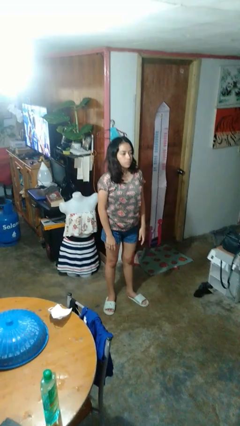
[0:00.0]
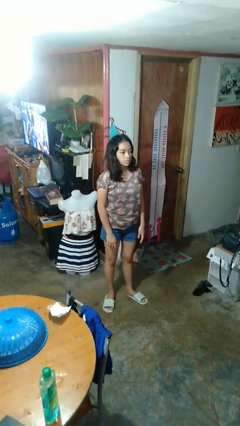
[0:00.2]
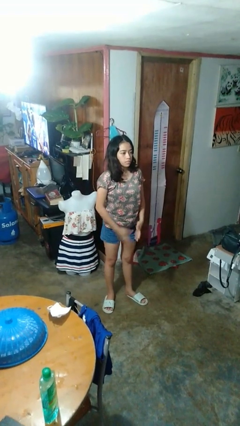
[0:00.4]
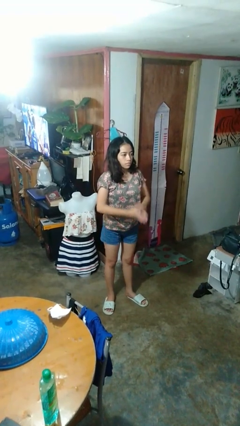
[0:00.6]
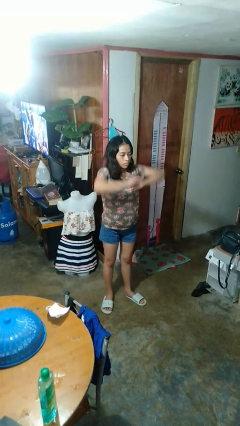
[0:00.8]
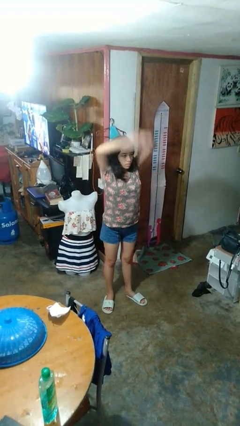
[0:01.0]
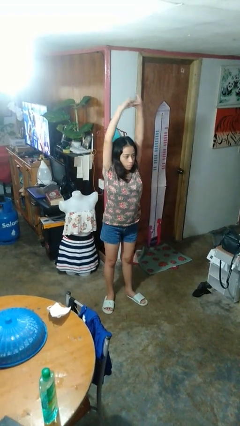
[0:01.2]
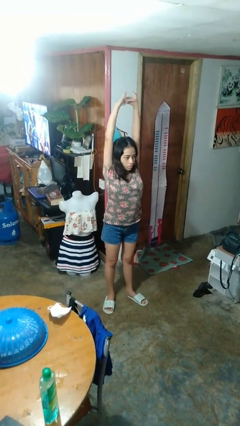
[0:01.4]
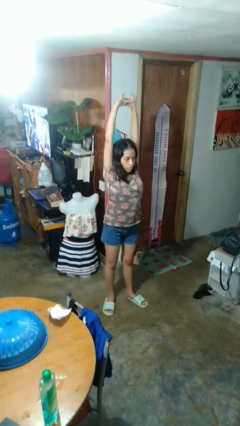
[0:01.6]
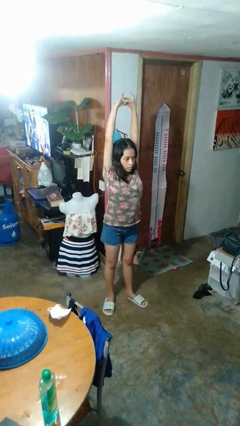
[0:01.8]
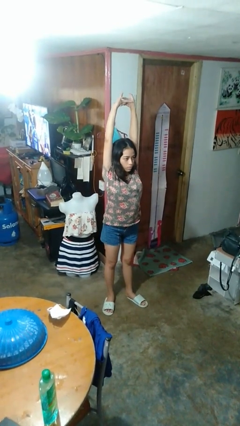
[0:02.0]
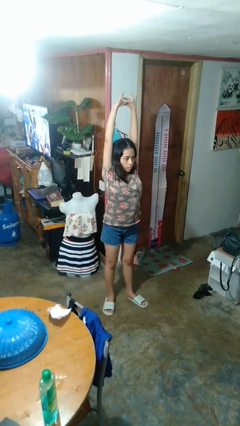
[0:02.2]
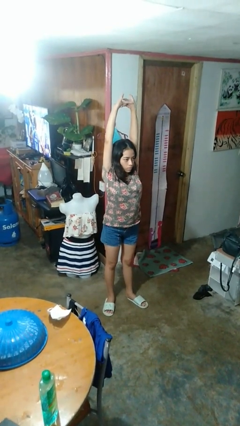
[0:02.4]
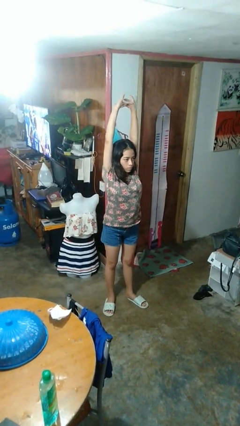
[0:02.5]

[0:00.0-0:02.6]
person stretches arms over head

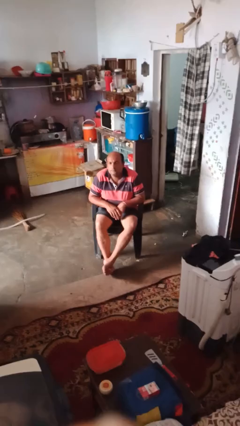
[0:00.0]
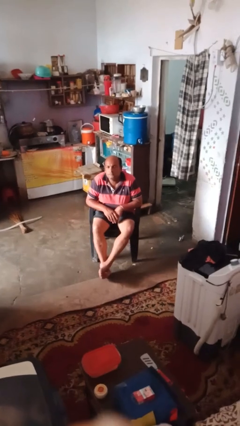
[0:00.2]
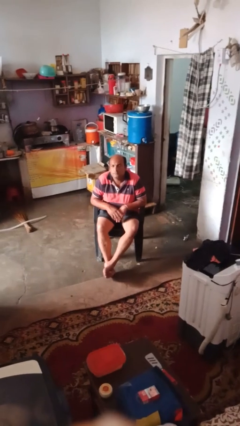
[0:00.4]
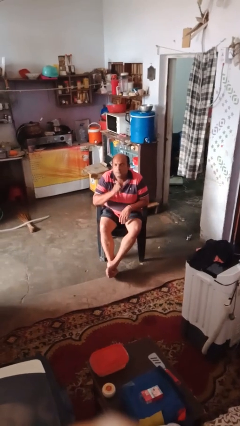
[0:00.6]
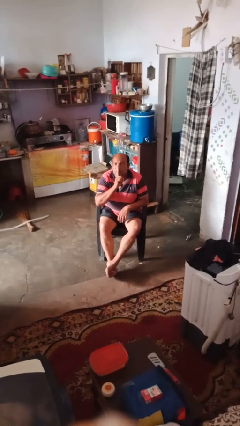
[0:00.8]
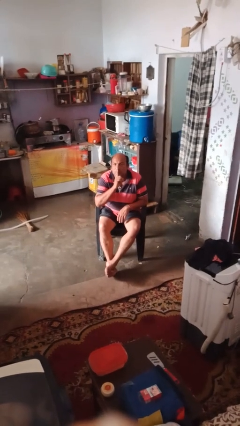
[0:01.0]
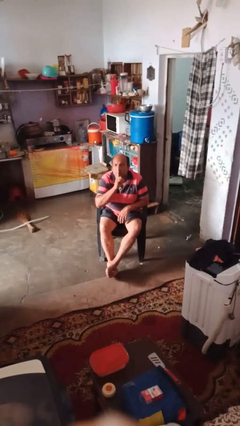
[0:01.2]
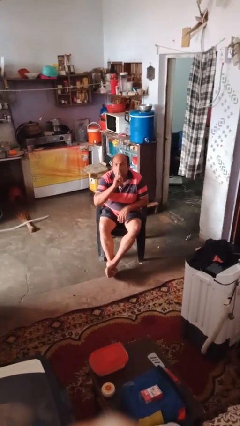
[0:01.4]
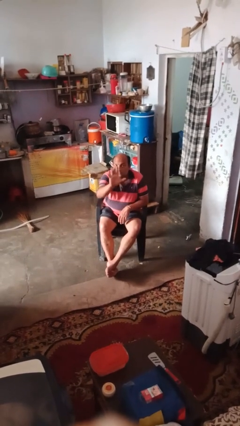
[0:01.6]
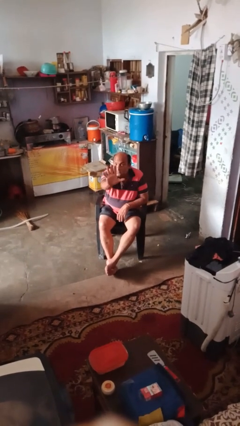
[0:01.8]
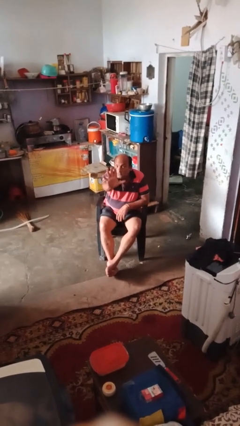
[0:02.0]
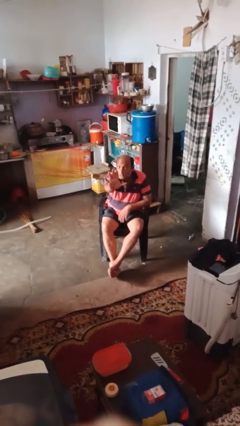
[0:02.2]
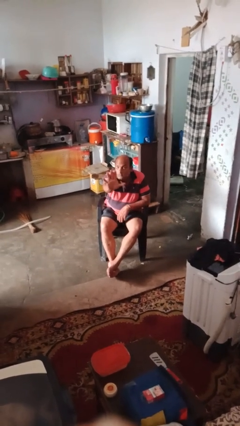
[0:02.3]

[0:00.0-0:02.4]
person gestures be quiet

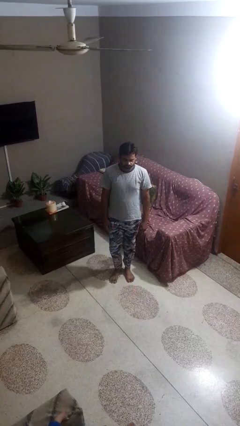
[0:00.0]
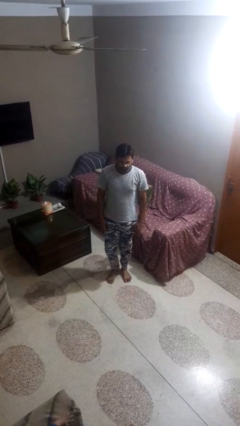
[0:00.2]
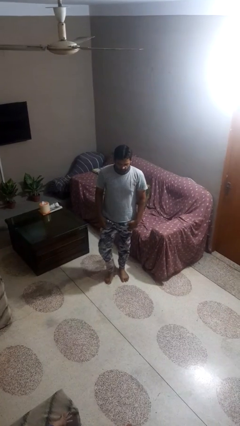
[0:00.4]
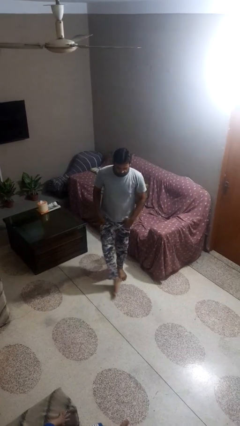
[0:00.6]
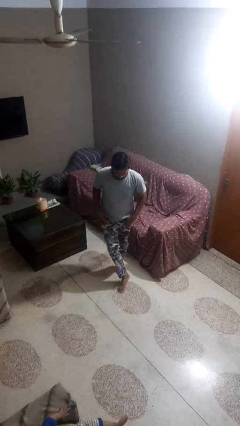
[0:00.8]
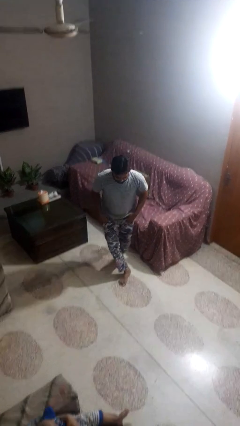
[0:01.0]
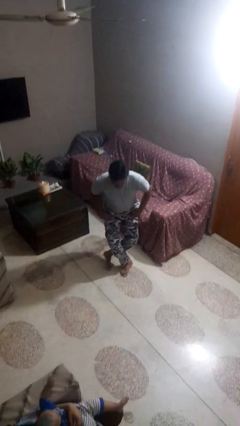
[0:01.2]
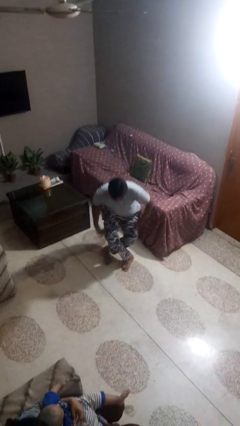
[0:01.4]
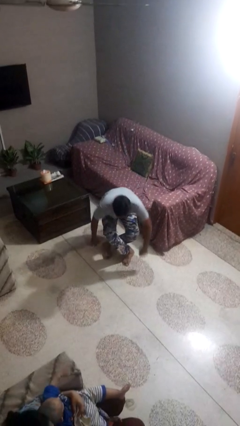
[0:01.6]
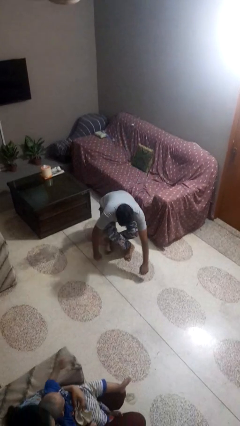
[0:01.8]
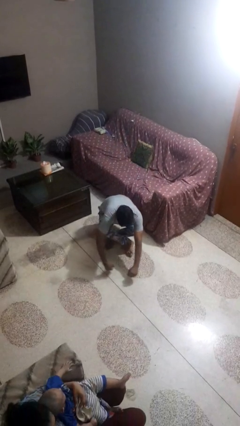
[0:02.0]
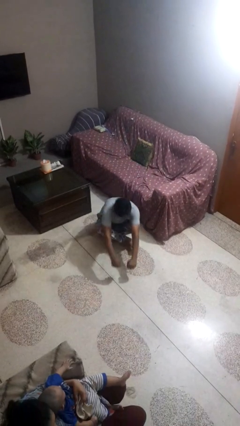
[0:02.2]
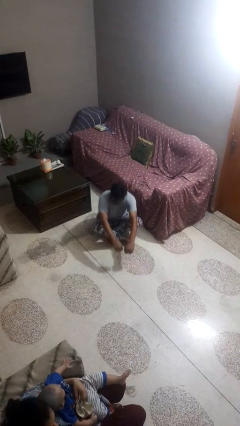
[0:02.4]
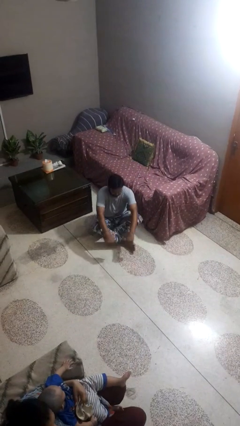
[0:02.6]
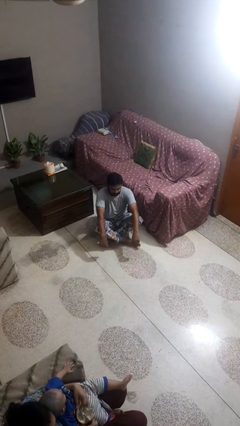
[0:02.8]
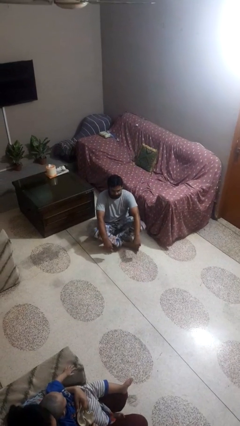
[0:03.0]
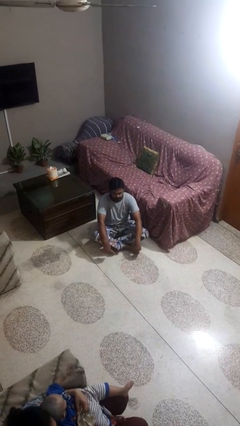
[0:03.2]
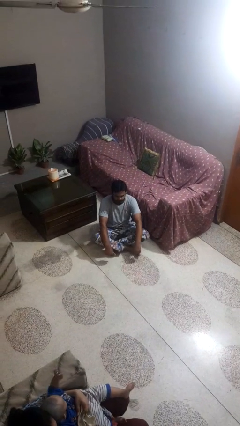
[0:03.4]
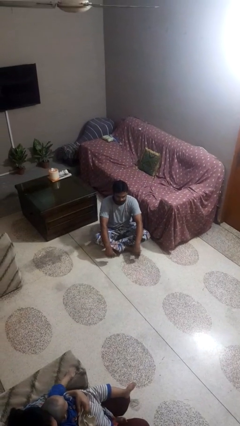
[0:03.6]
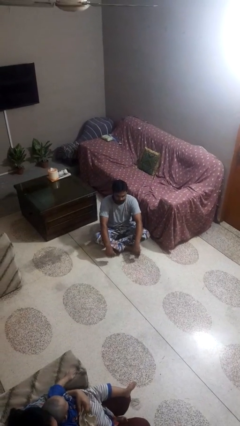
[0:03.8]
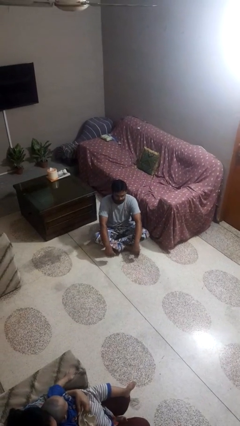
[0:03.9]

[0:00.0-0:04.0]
person sits crisscross

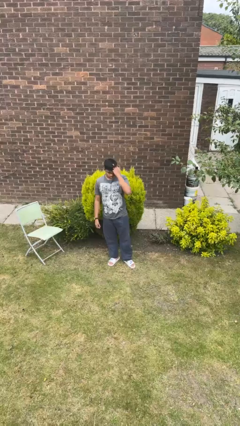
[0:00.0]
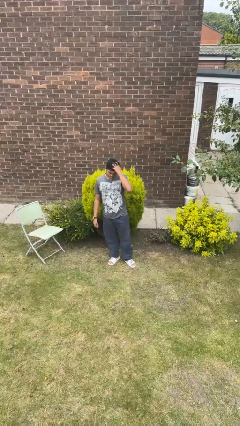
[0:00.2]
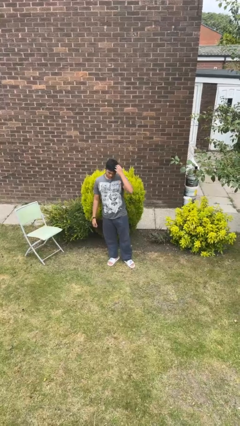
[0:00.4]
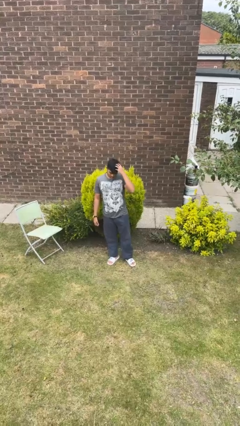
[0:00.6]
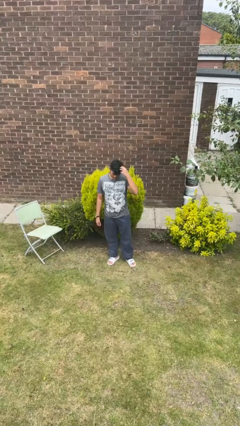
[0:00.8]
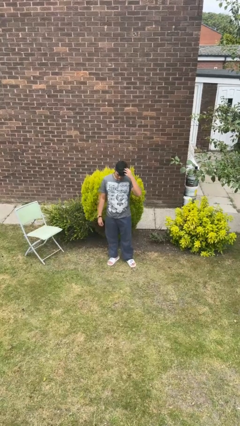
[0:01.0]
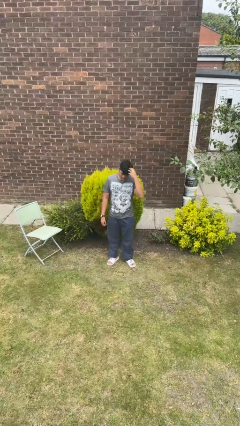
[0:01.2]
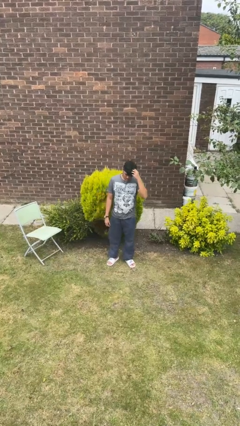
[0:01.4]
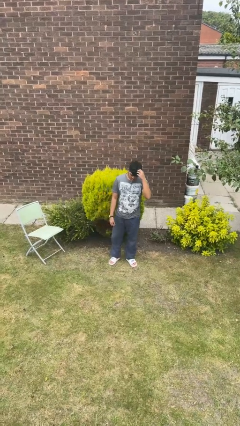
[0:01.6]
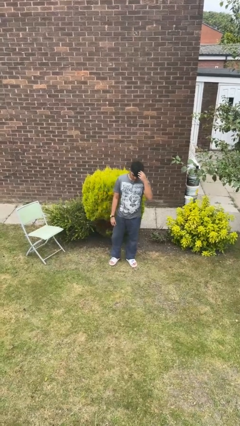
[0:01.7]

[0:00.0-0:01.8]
person scratches face

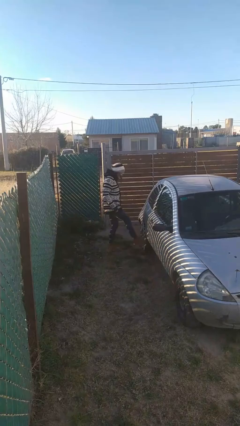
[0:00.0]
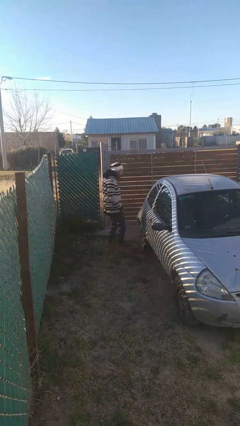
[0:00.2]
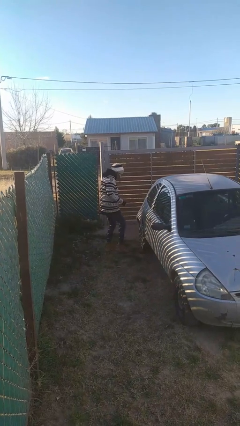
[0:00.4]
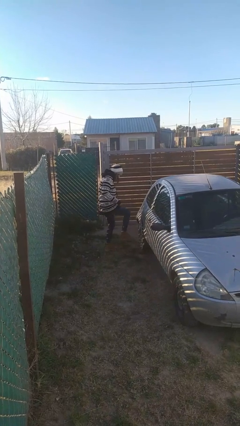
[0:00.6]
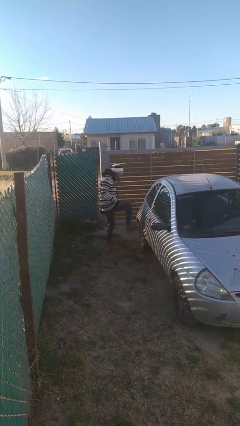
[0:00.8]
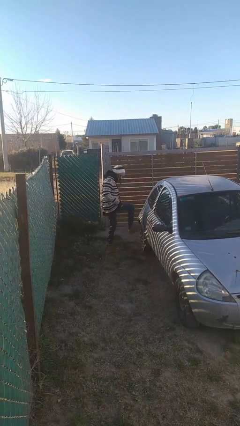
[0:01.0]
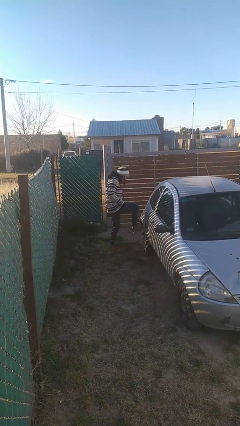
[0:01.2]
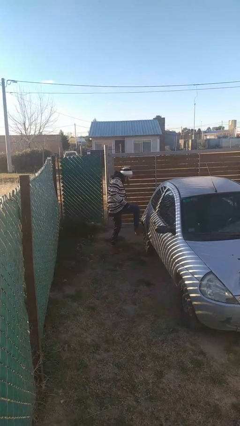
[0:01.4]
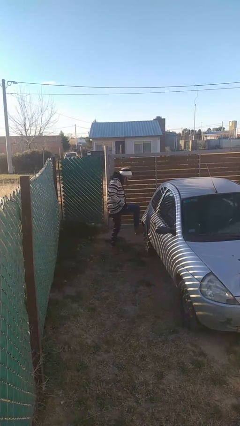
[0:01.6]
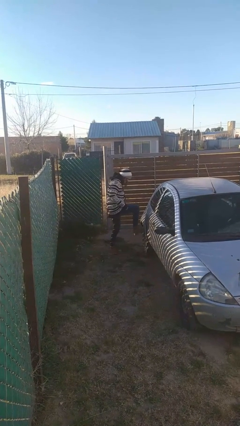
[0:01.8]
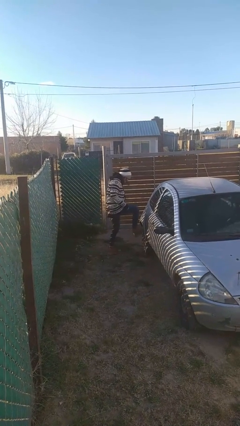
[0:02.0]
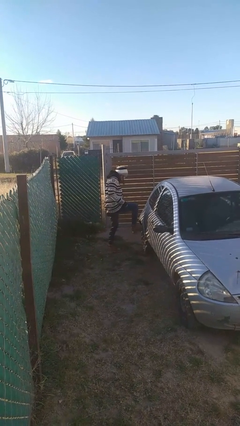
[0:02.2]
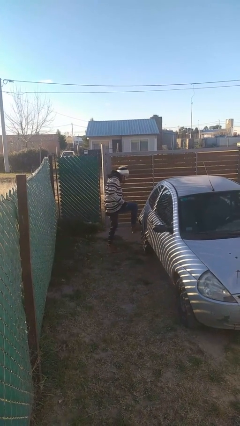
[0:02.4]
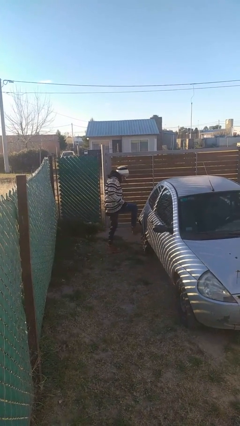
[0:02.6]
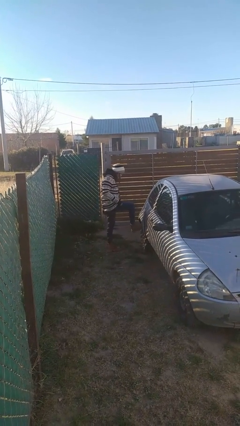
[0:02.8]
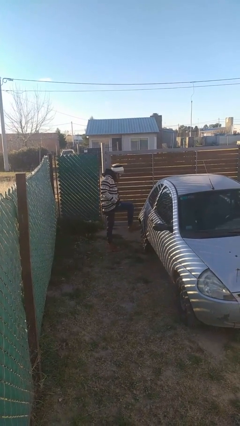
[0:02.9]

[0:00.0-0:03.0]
person kicks car tires

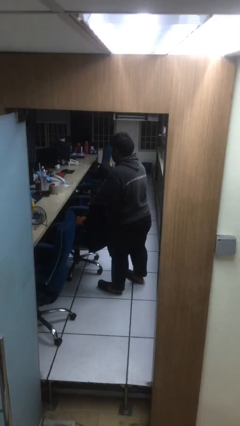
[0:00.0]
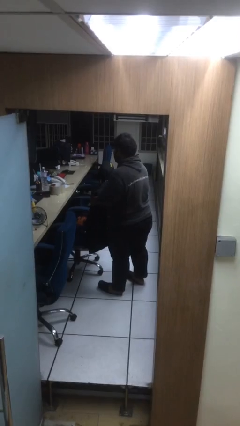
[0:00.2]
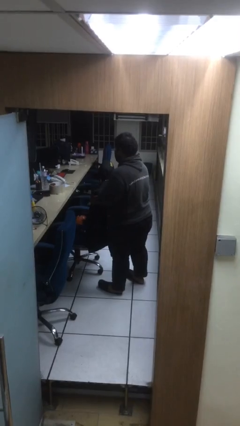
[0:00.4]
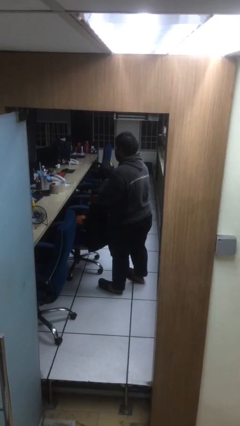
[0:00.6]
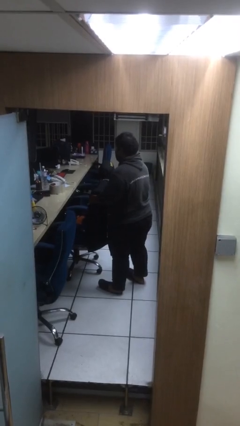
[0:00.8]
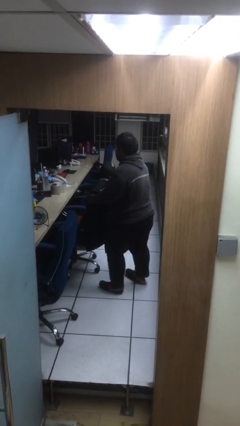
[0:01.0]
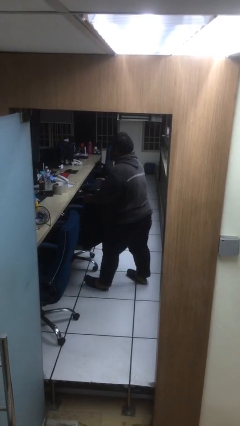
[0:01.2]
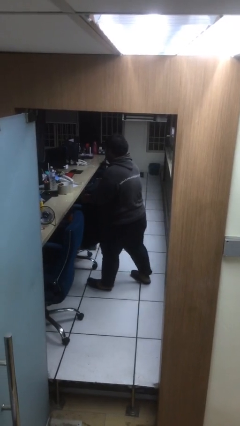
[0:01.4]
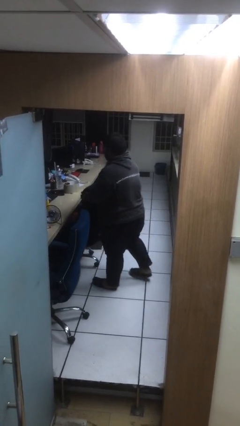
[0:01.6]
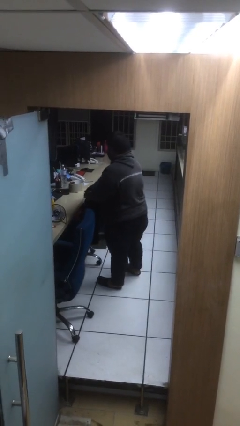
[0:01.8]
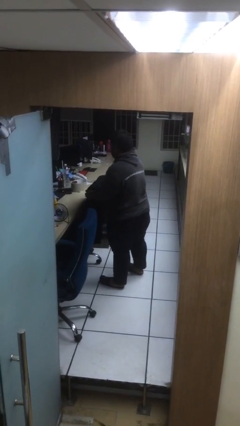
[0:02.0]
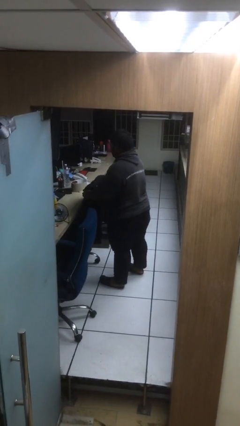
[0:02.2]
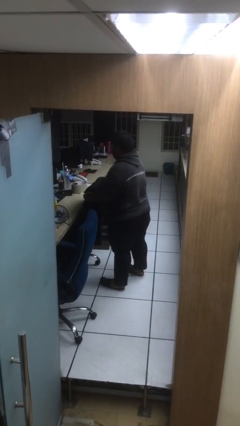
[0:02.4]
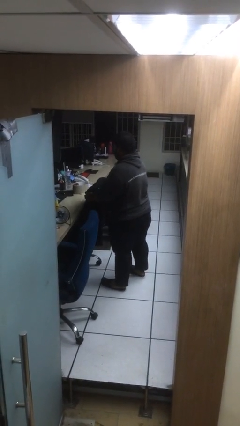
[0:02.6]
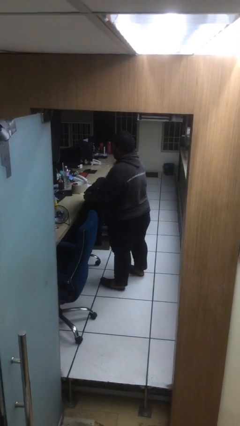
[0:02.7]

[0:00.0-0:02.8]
person pushes in chair

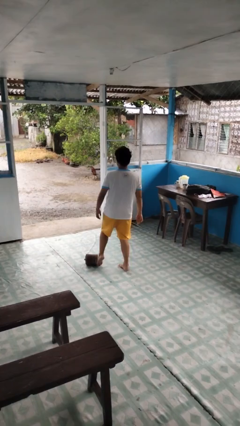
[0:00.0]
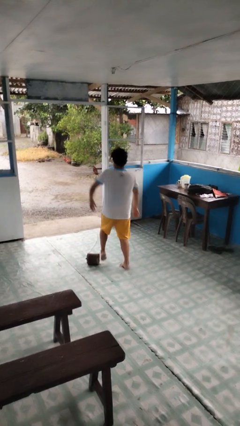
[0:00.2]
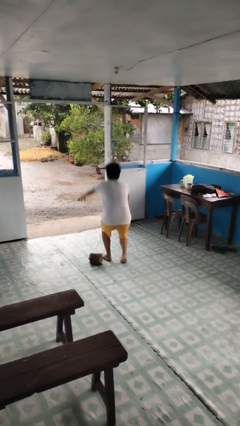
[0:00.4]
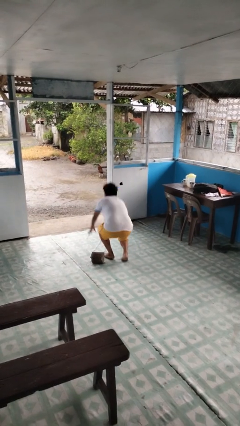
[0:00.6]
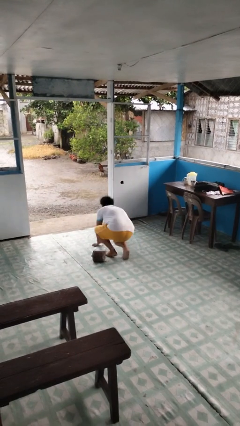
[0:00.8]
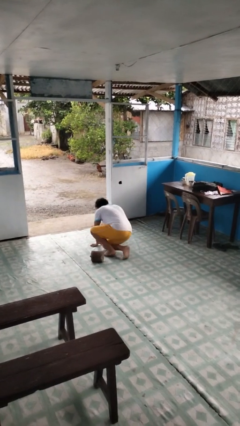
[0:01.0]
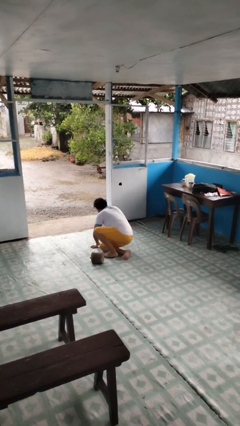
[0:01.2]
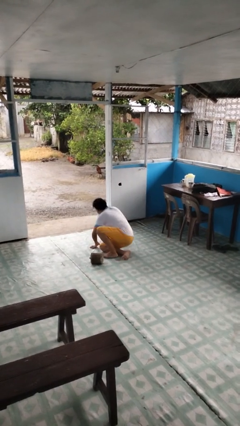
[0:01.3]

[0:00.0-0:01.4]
person trips on object on floor
